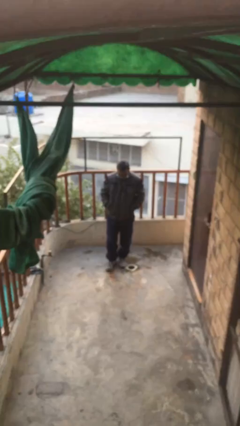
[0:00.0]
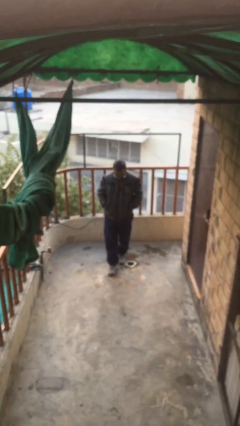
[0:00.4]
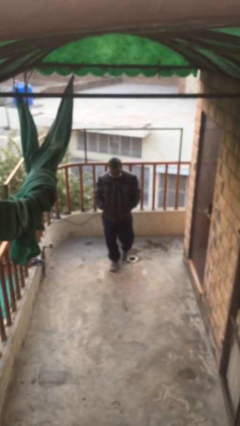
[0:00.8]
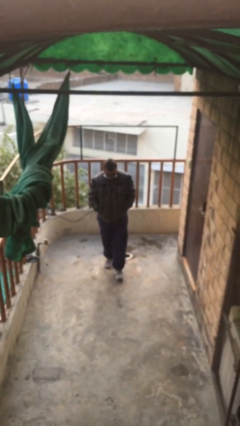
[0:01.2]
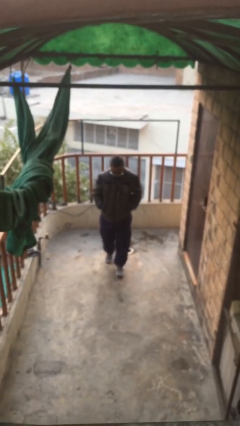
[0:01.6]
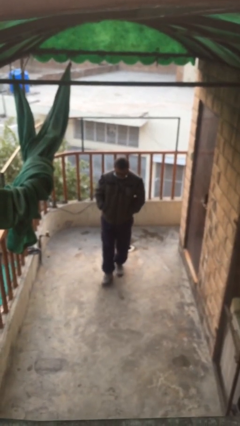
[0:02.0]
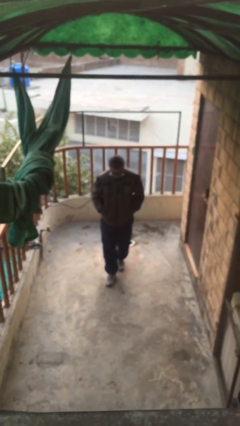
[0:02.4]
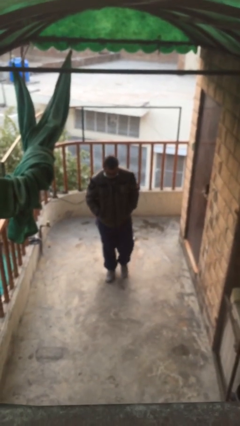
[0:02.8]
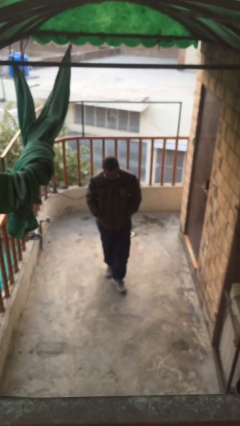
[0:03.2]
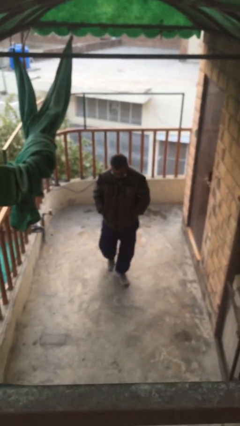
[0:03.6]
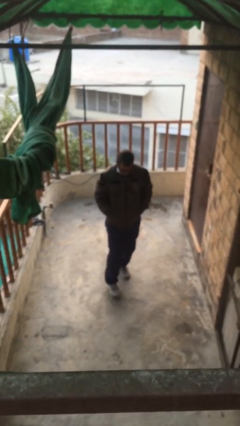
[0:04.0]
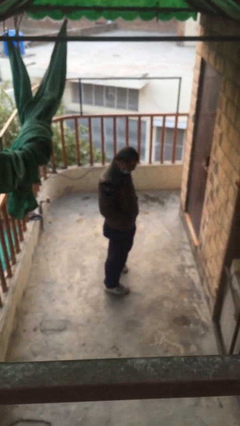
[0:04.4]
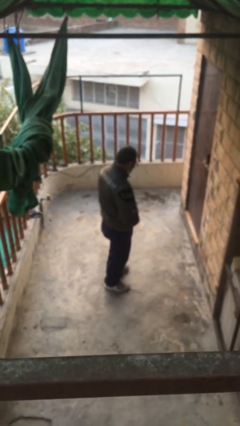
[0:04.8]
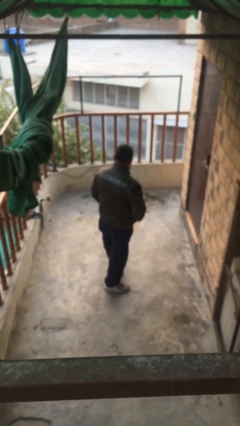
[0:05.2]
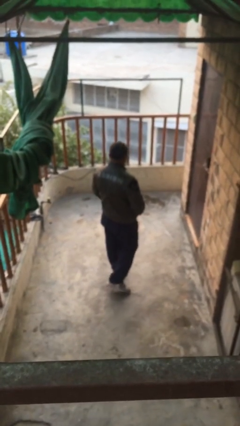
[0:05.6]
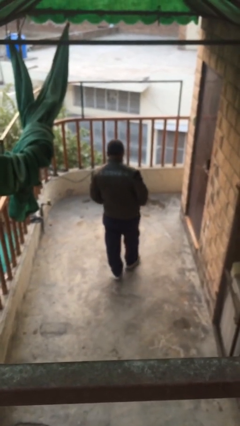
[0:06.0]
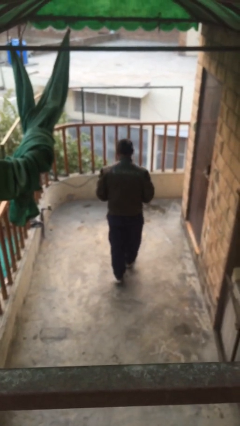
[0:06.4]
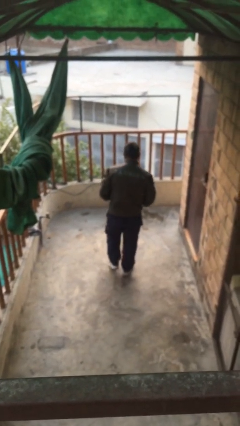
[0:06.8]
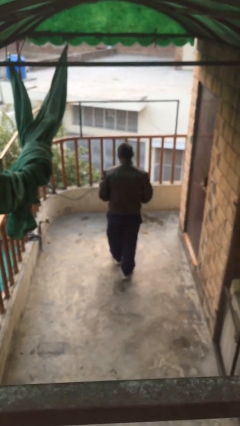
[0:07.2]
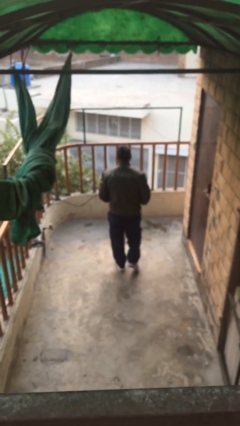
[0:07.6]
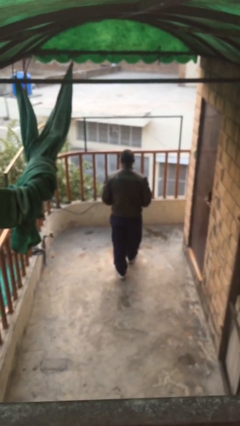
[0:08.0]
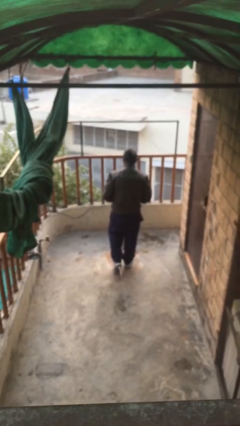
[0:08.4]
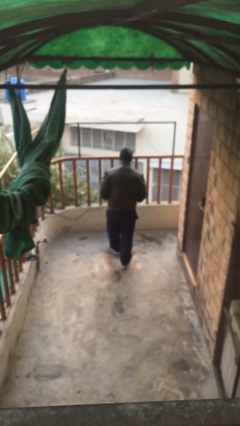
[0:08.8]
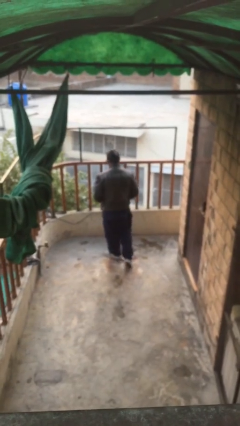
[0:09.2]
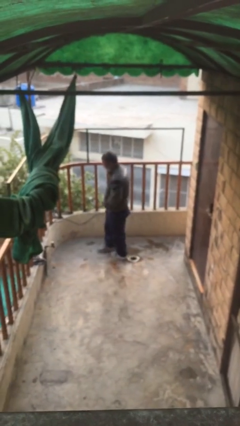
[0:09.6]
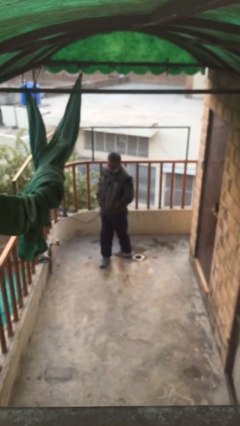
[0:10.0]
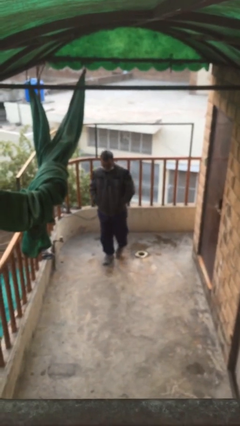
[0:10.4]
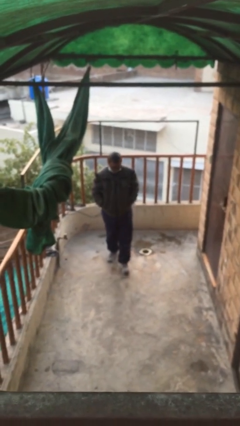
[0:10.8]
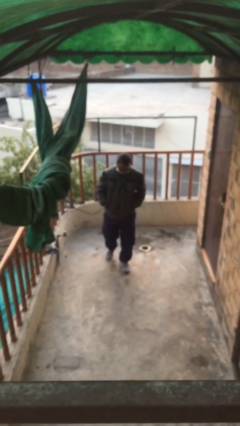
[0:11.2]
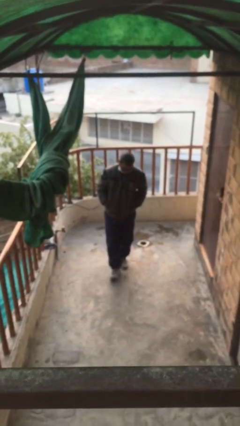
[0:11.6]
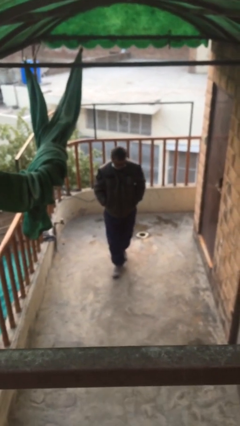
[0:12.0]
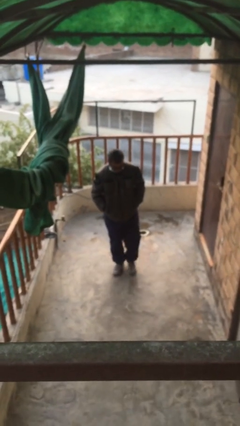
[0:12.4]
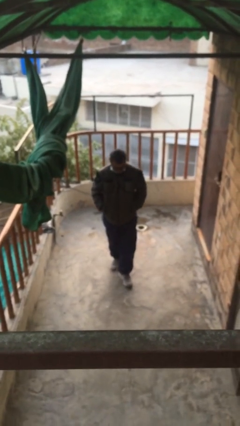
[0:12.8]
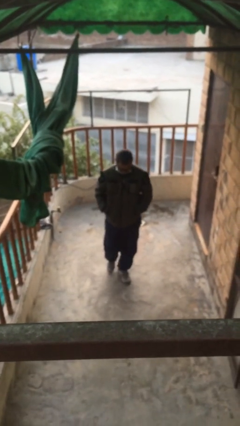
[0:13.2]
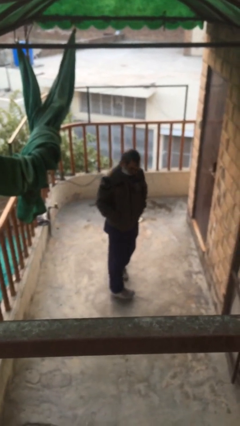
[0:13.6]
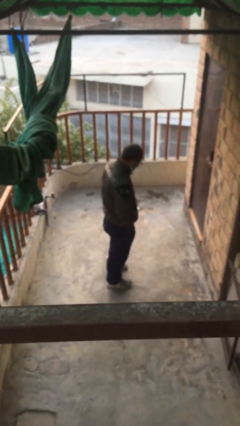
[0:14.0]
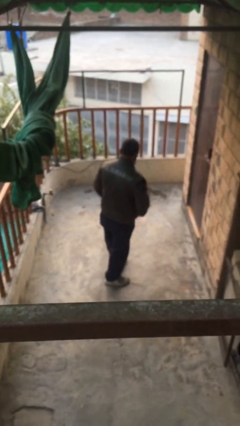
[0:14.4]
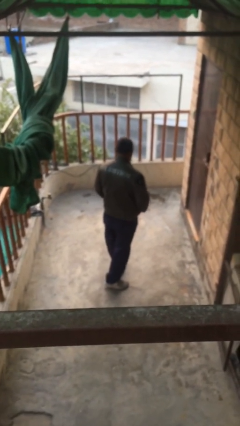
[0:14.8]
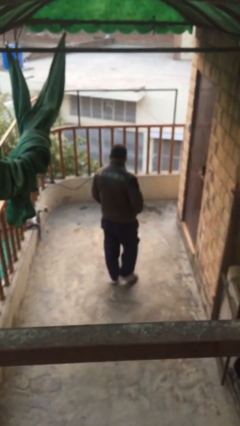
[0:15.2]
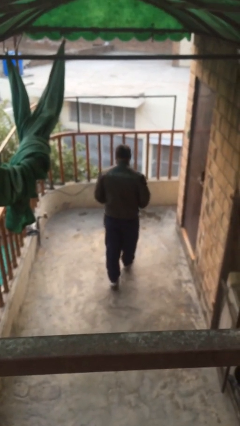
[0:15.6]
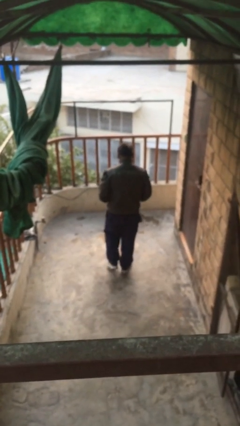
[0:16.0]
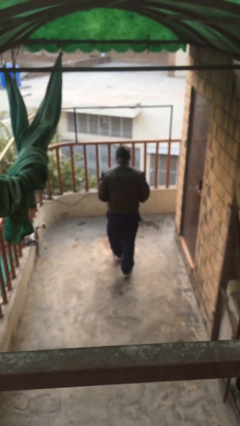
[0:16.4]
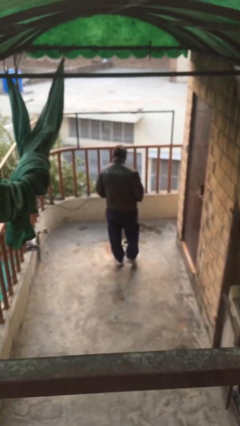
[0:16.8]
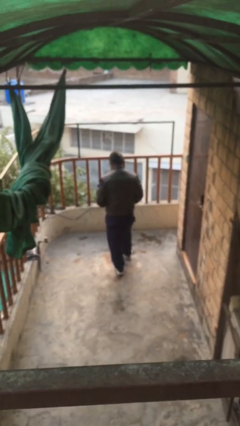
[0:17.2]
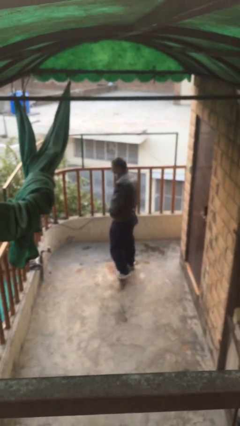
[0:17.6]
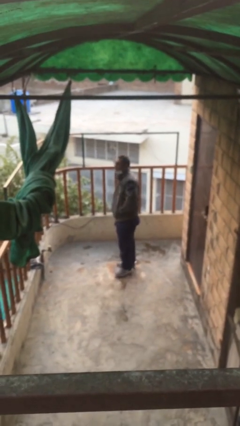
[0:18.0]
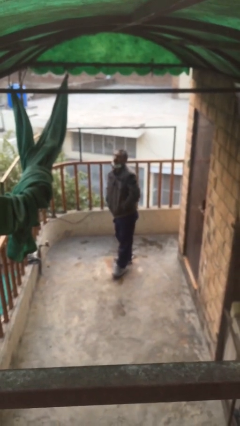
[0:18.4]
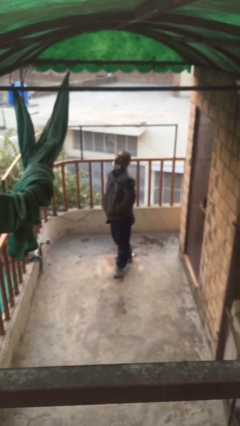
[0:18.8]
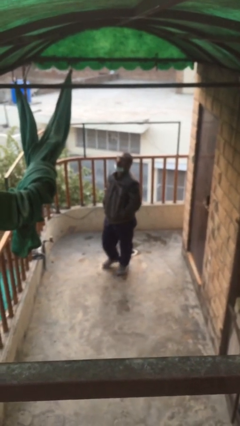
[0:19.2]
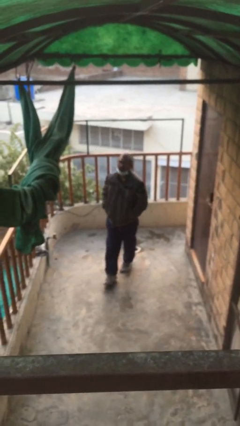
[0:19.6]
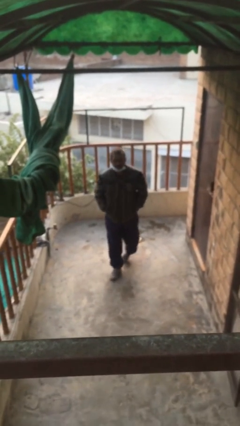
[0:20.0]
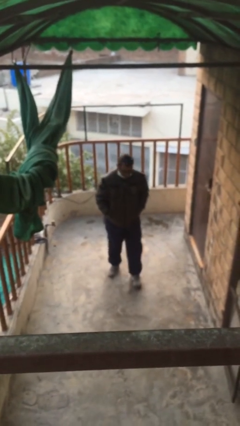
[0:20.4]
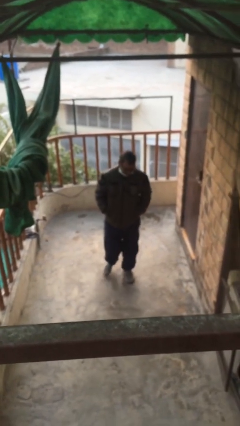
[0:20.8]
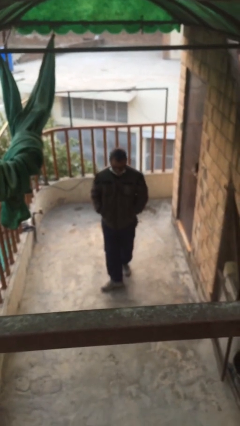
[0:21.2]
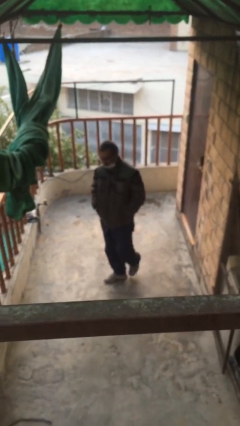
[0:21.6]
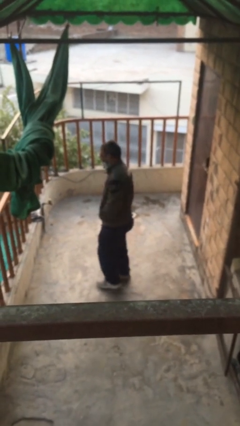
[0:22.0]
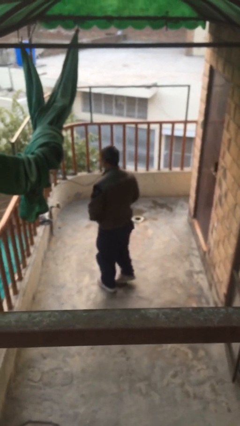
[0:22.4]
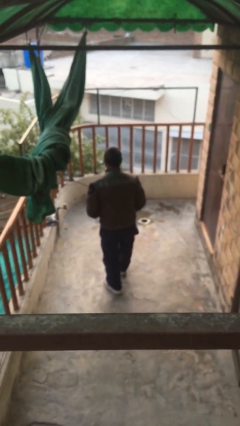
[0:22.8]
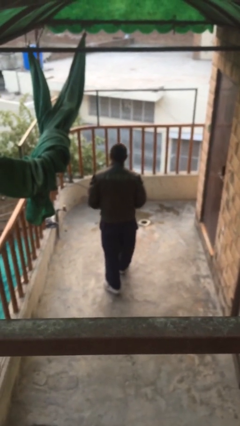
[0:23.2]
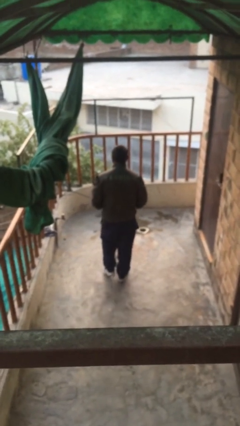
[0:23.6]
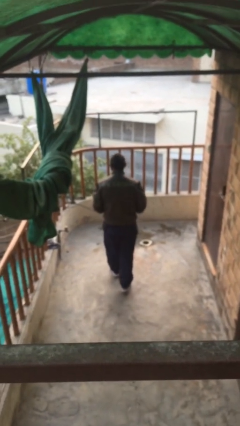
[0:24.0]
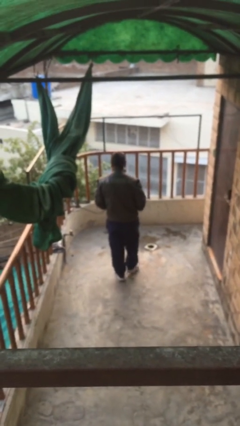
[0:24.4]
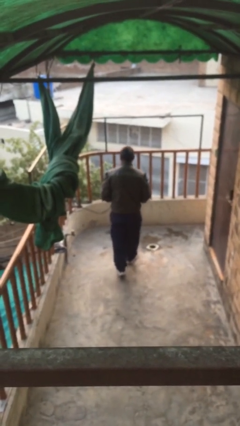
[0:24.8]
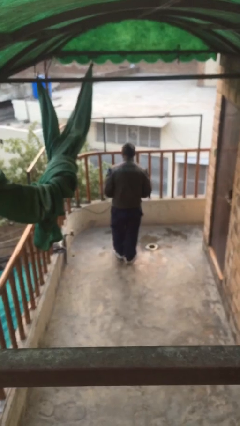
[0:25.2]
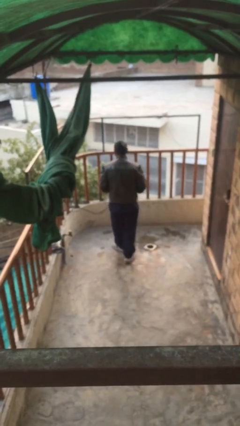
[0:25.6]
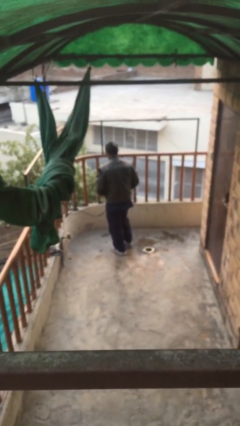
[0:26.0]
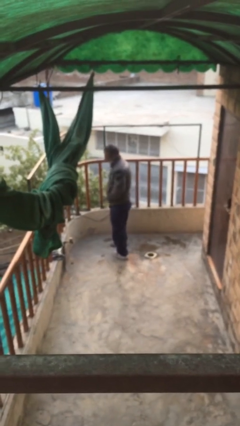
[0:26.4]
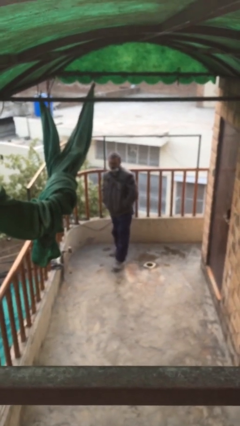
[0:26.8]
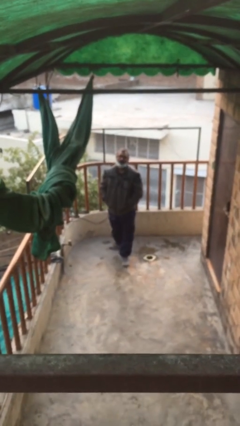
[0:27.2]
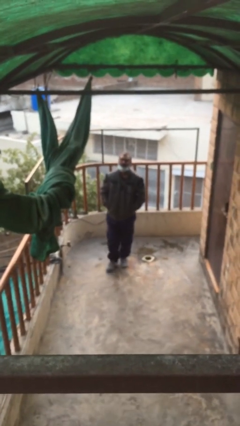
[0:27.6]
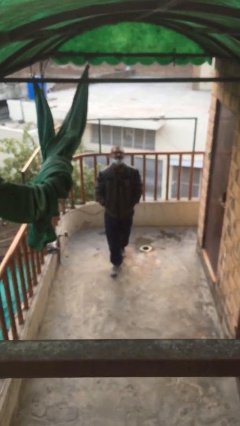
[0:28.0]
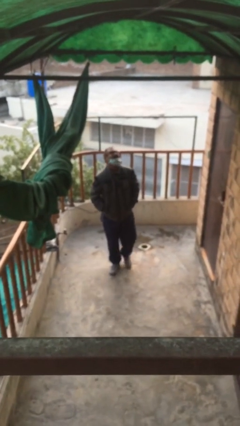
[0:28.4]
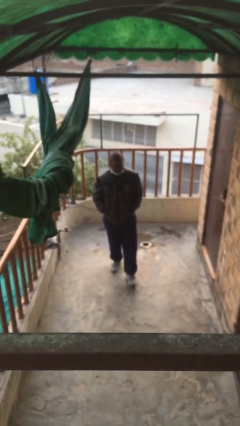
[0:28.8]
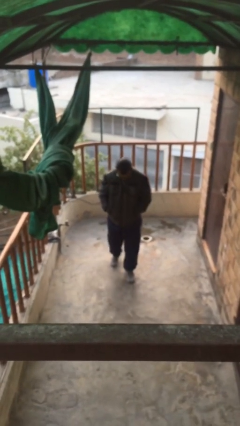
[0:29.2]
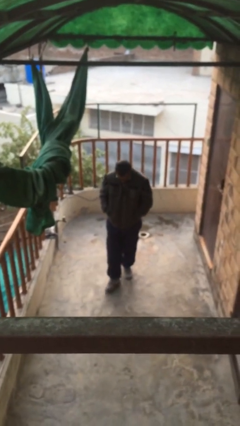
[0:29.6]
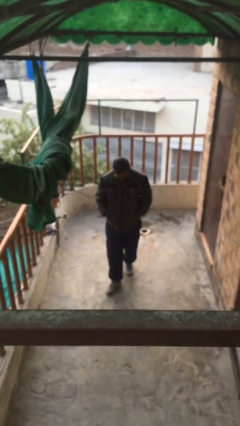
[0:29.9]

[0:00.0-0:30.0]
person walks

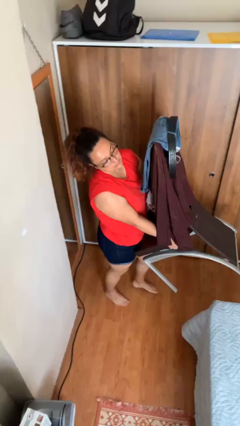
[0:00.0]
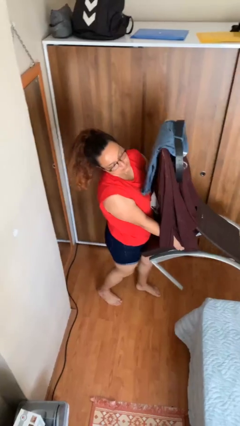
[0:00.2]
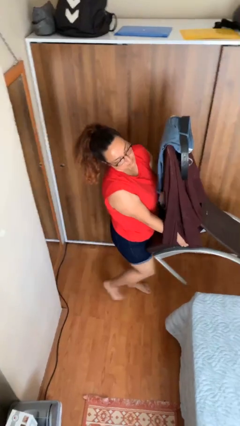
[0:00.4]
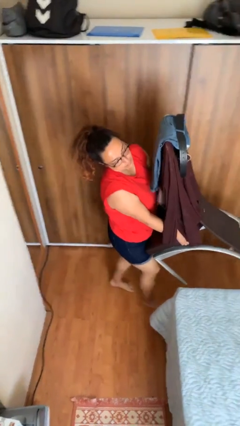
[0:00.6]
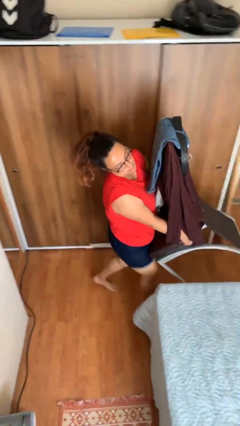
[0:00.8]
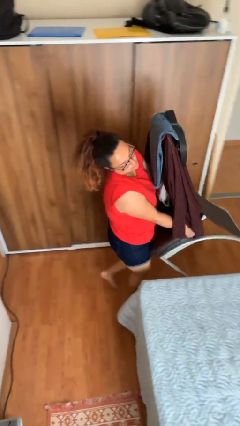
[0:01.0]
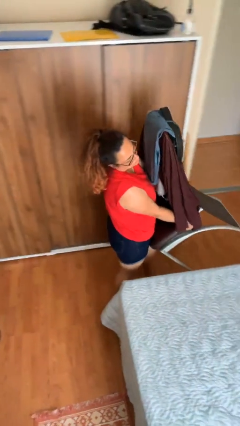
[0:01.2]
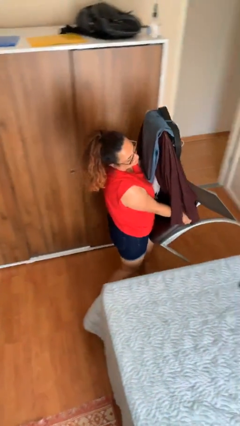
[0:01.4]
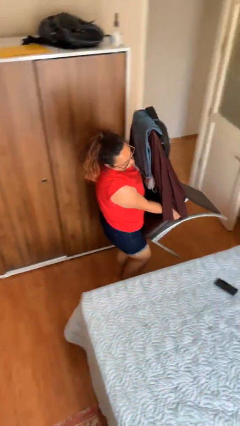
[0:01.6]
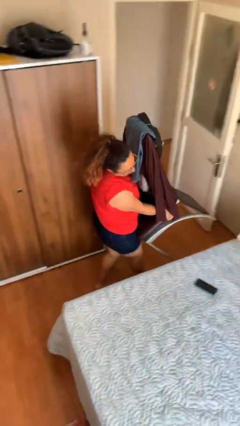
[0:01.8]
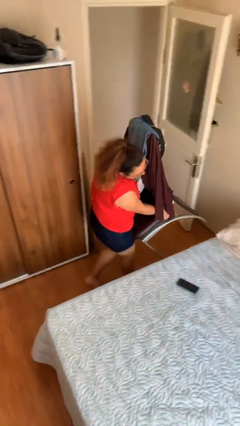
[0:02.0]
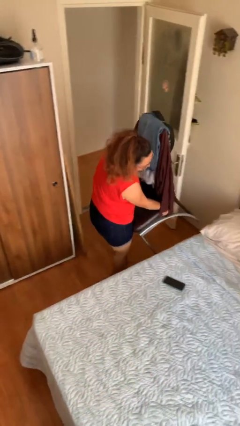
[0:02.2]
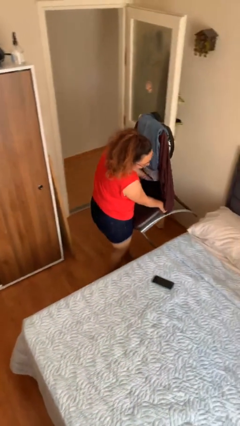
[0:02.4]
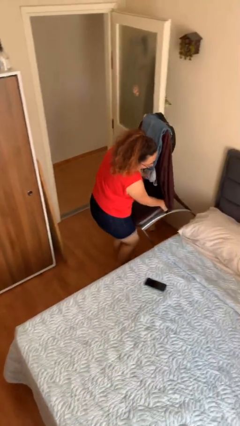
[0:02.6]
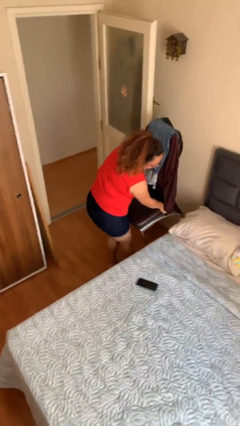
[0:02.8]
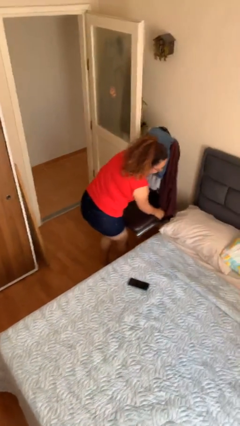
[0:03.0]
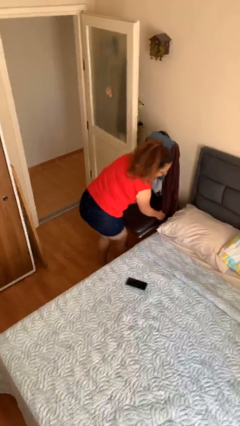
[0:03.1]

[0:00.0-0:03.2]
person carries heavy object
